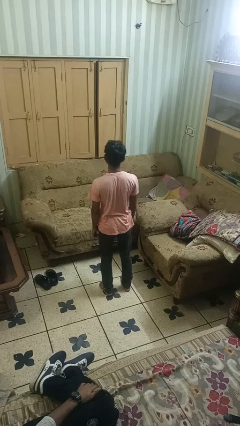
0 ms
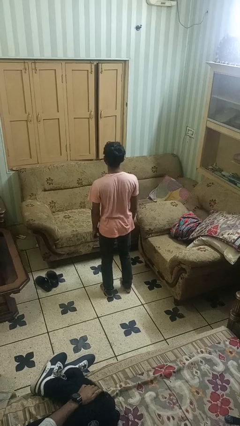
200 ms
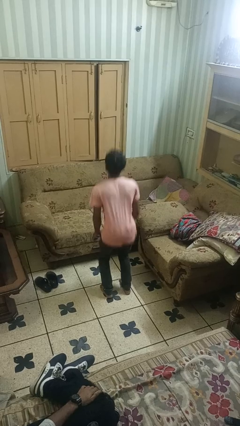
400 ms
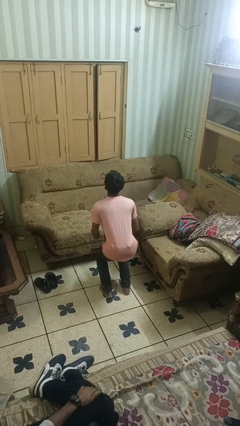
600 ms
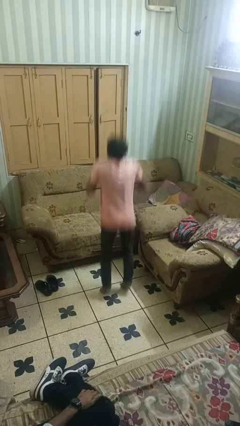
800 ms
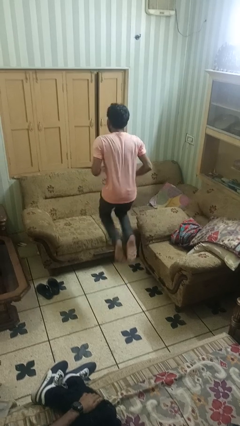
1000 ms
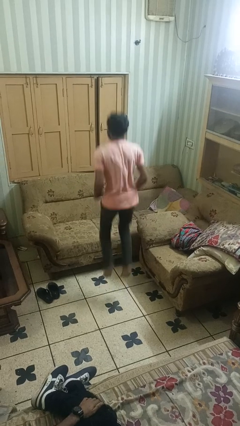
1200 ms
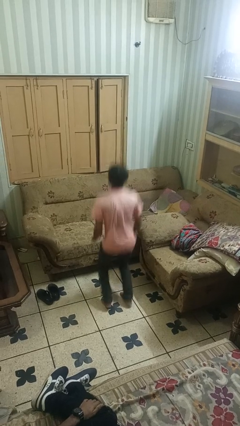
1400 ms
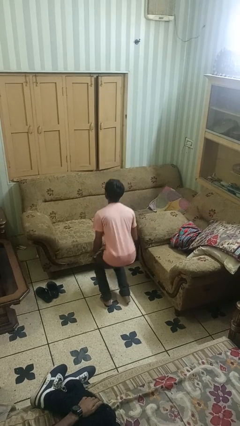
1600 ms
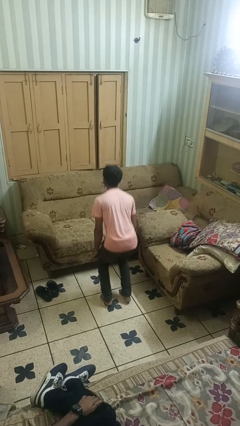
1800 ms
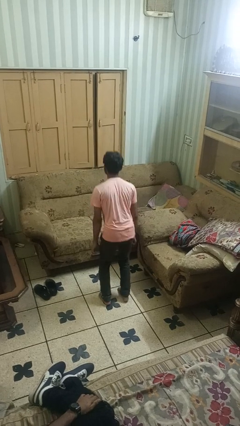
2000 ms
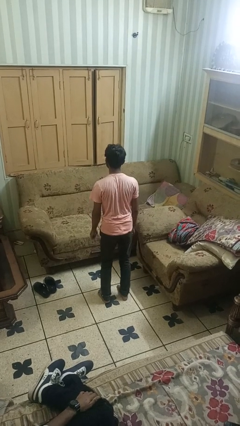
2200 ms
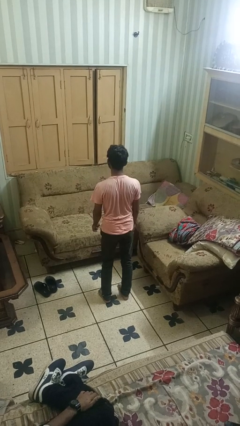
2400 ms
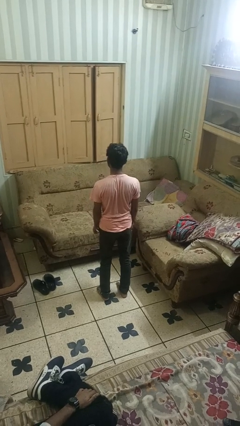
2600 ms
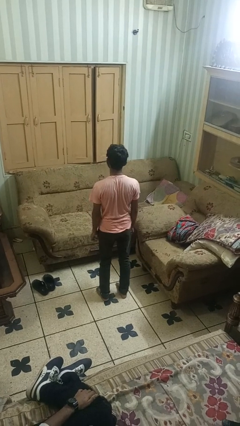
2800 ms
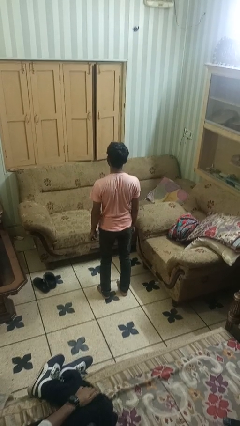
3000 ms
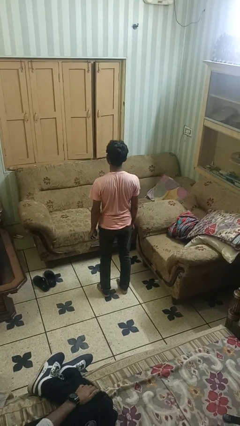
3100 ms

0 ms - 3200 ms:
person jumps

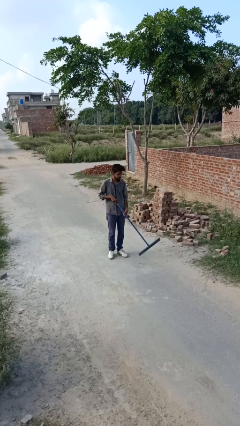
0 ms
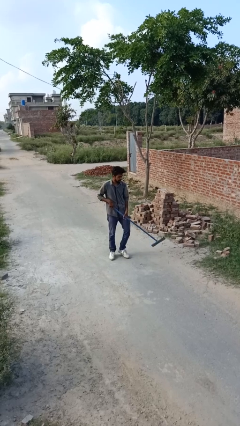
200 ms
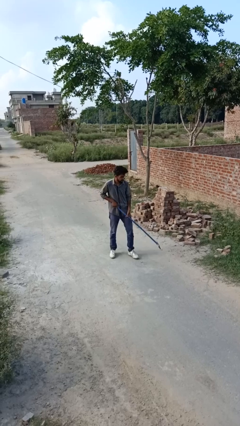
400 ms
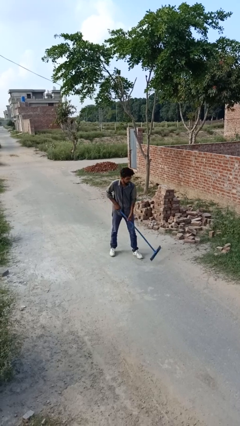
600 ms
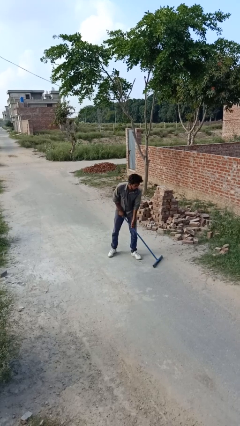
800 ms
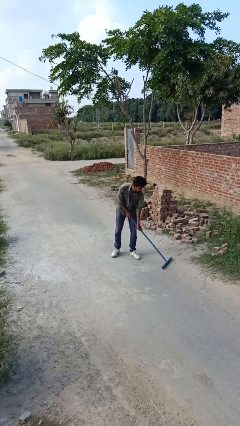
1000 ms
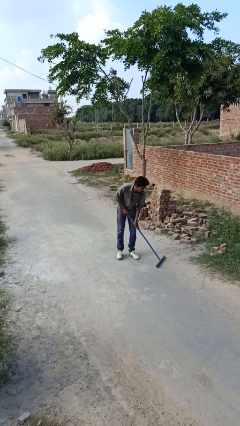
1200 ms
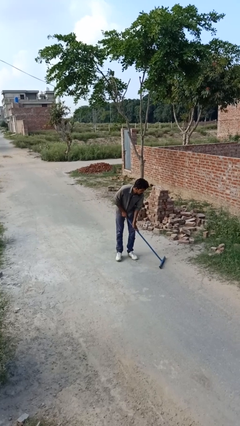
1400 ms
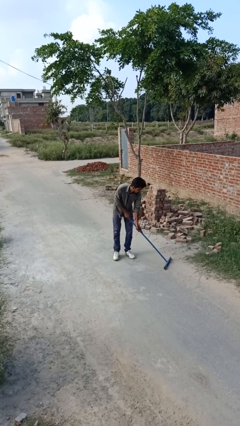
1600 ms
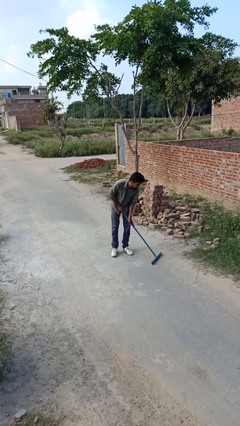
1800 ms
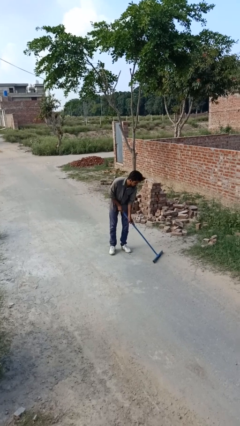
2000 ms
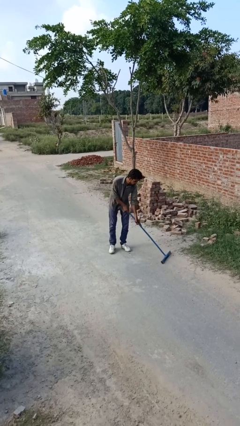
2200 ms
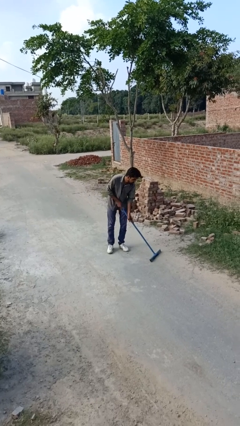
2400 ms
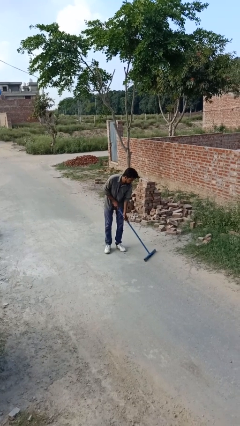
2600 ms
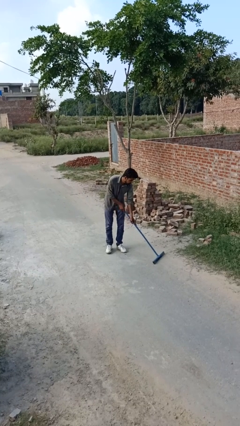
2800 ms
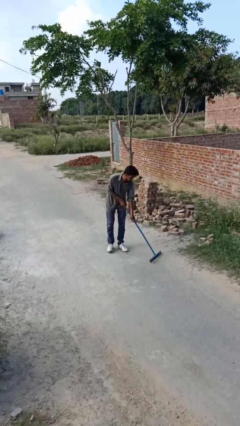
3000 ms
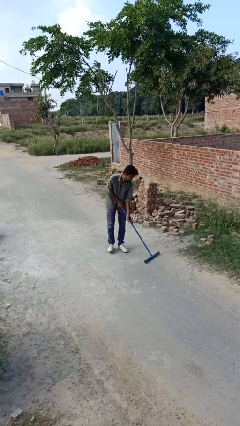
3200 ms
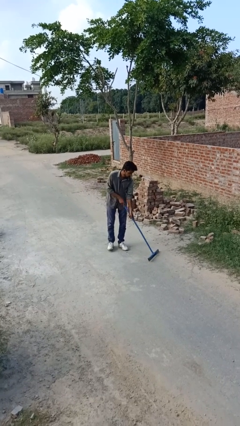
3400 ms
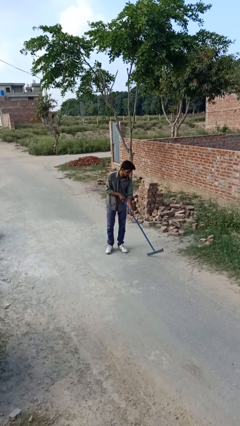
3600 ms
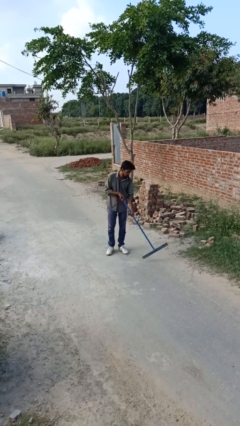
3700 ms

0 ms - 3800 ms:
person sweeps floor

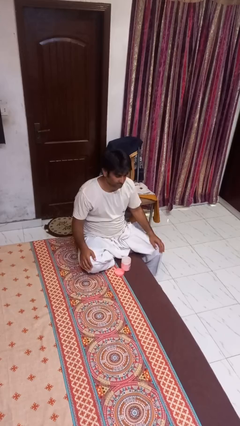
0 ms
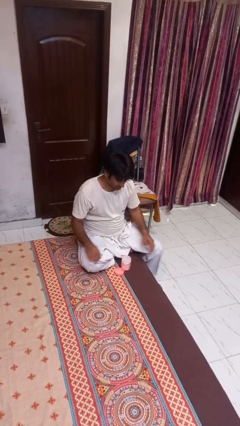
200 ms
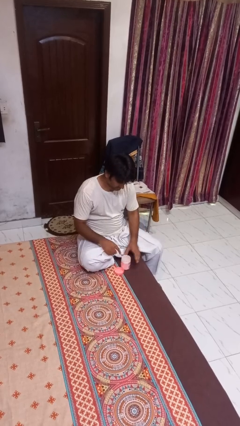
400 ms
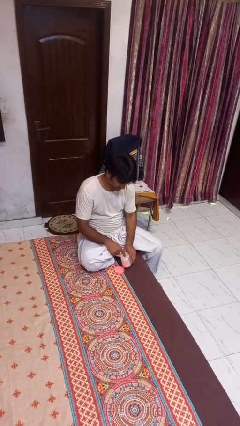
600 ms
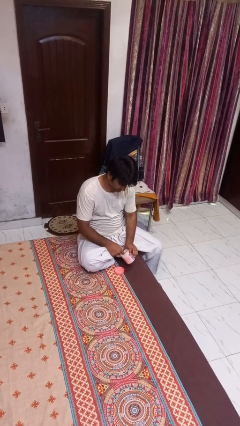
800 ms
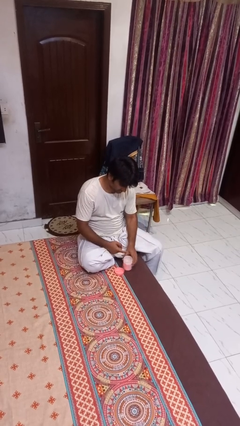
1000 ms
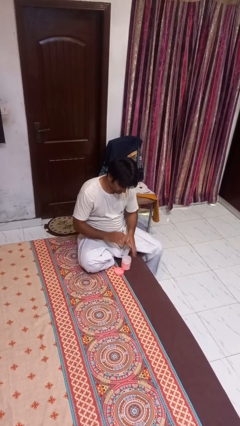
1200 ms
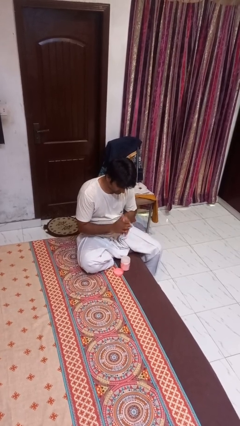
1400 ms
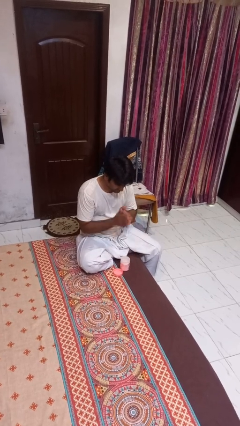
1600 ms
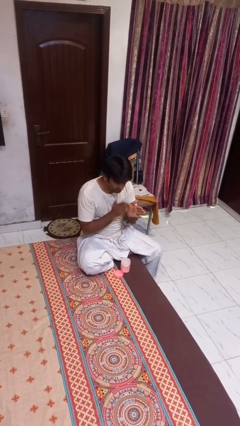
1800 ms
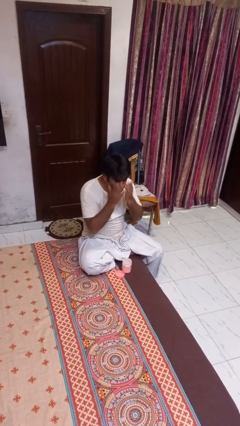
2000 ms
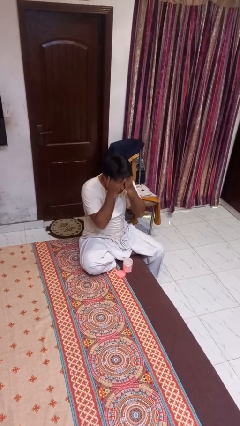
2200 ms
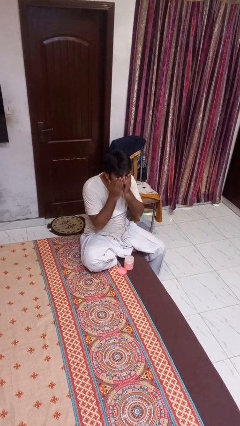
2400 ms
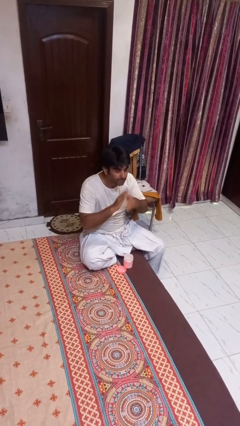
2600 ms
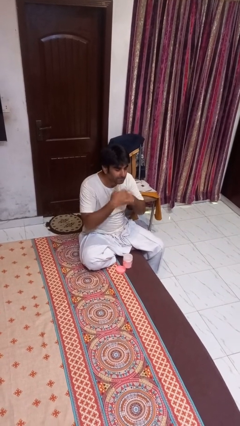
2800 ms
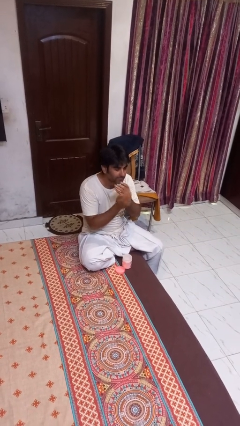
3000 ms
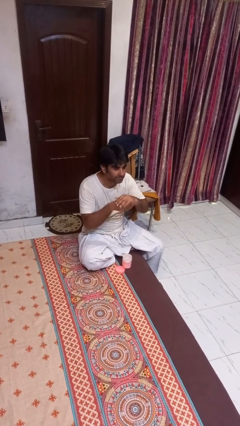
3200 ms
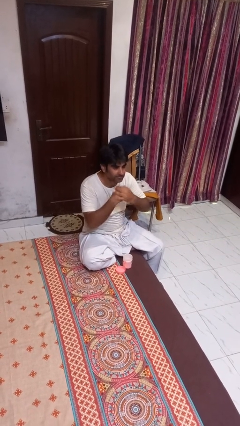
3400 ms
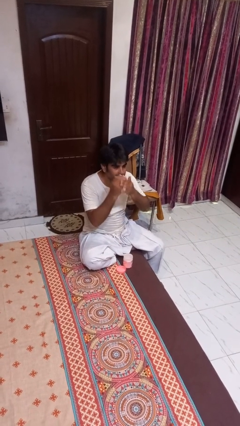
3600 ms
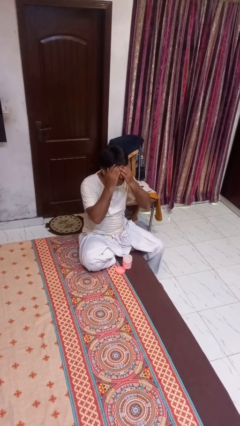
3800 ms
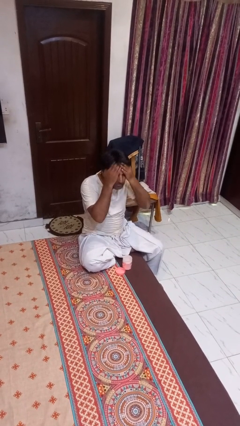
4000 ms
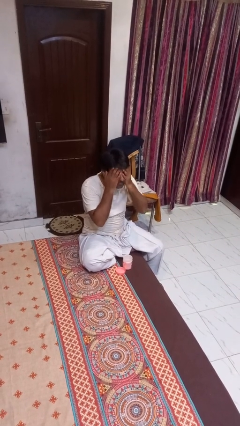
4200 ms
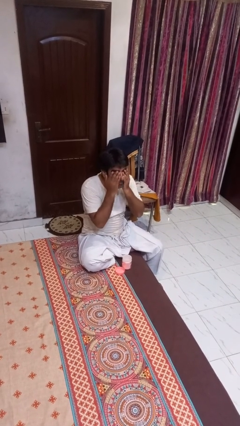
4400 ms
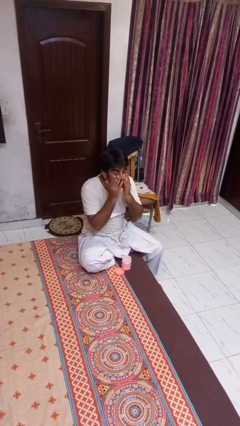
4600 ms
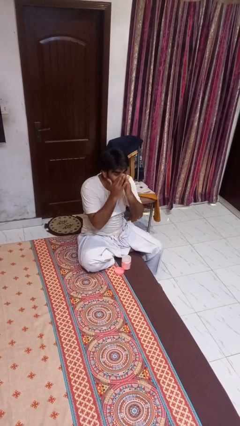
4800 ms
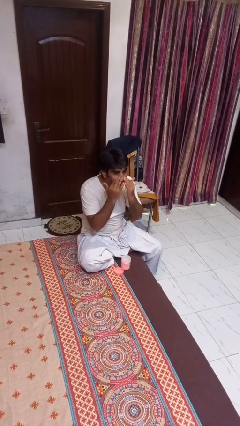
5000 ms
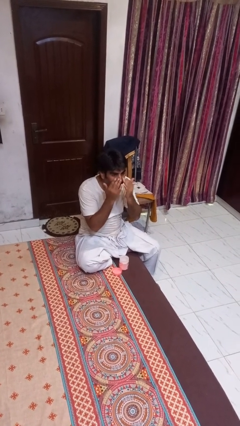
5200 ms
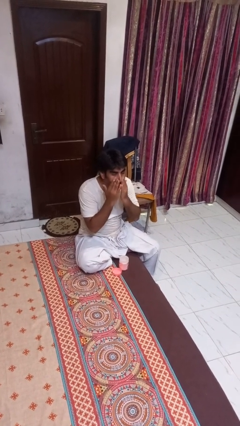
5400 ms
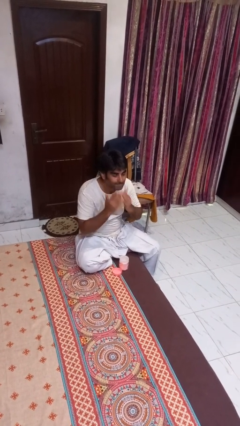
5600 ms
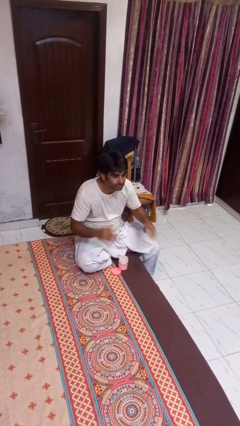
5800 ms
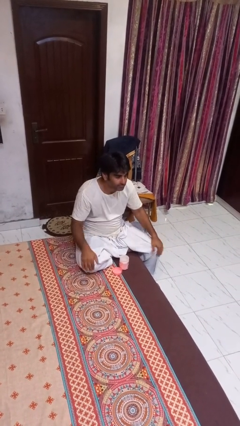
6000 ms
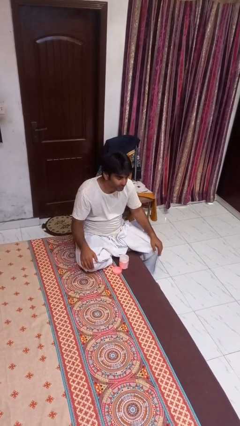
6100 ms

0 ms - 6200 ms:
person applies facial moisturizer

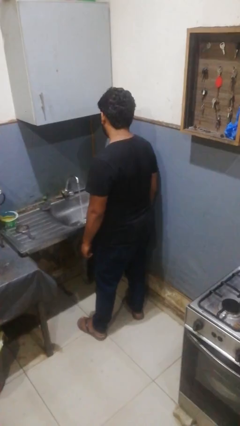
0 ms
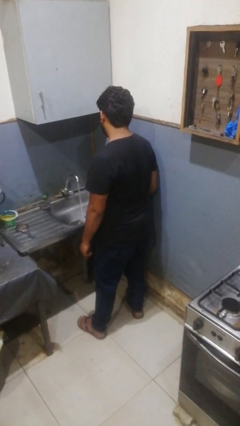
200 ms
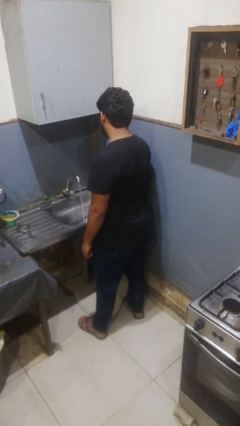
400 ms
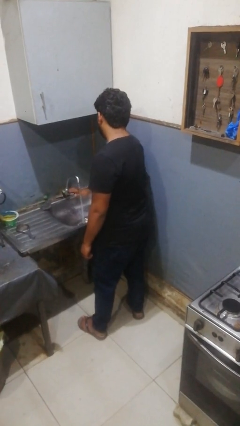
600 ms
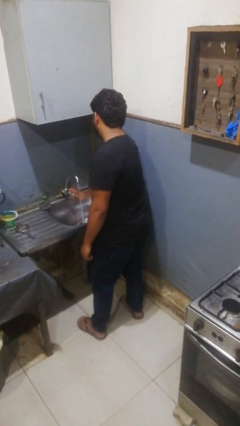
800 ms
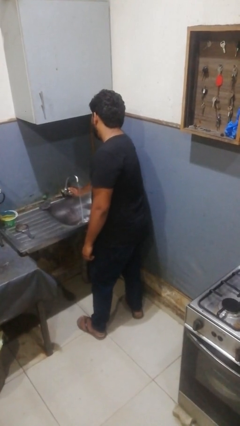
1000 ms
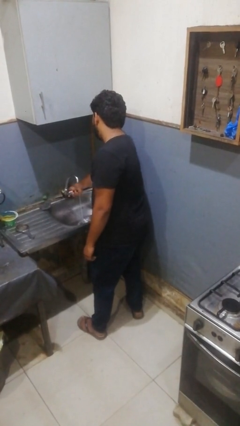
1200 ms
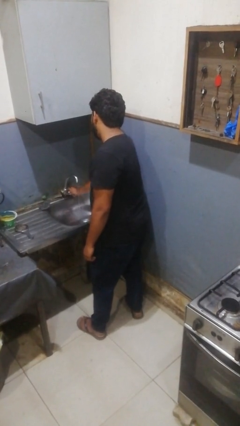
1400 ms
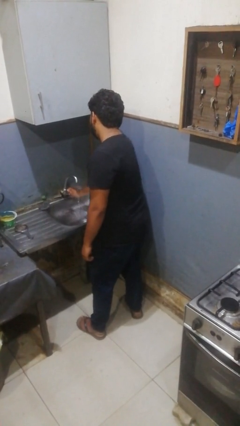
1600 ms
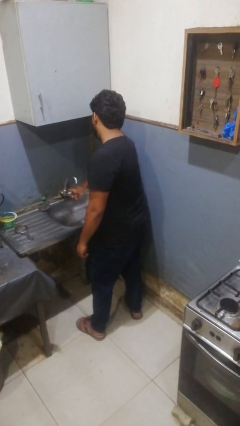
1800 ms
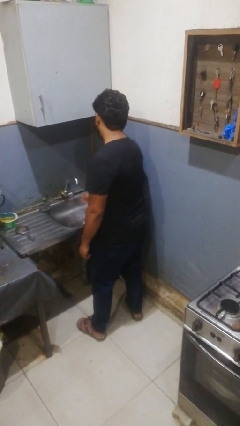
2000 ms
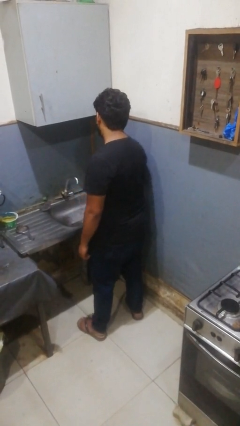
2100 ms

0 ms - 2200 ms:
person turns off faucet

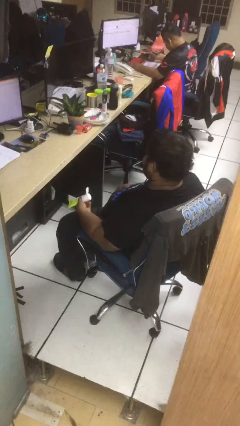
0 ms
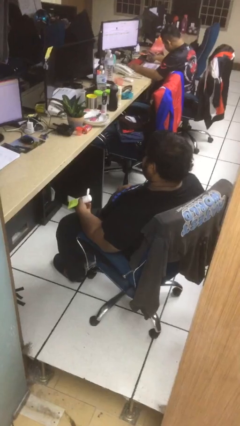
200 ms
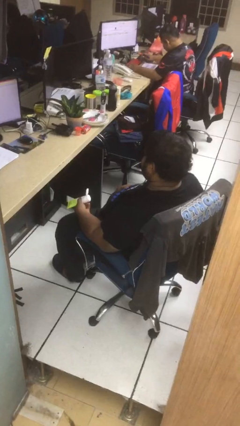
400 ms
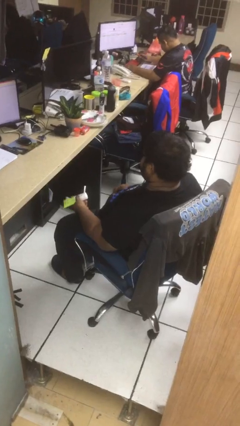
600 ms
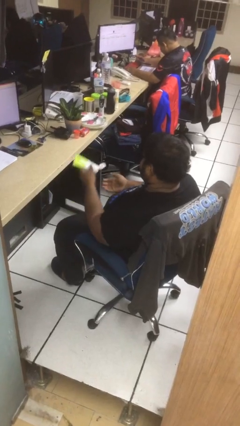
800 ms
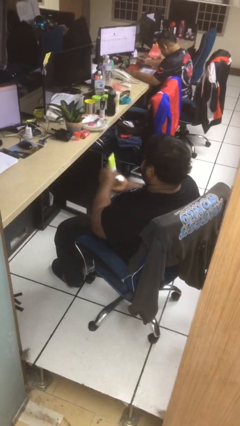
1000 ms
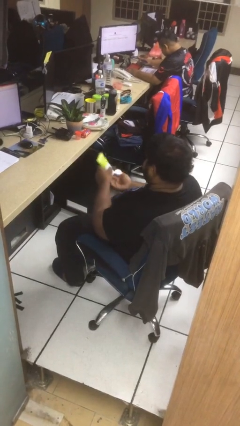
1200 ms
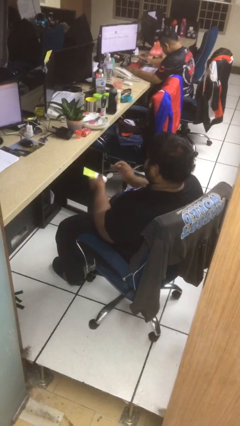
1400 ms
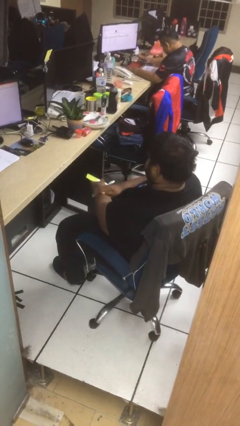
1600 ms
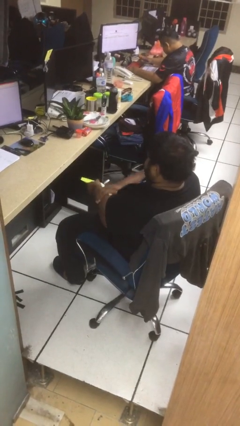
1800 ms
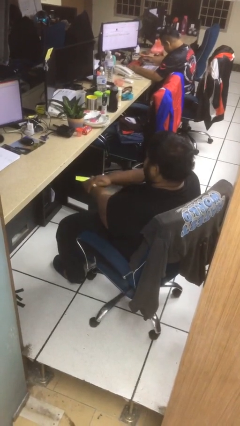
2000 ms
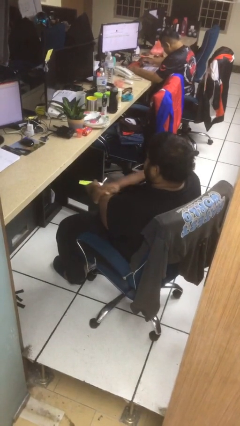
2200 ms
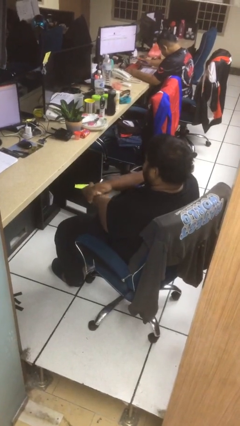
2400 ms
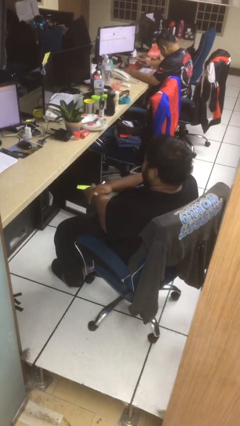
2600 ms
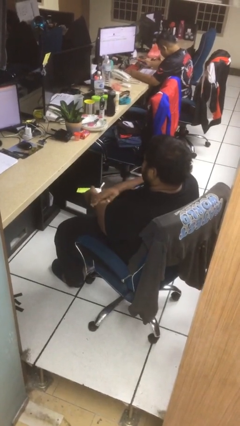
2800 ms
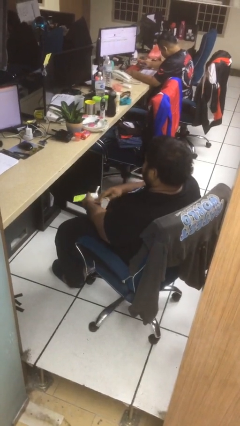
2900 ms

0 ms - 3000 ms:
person applies sunscreen
